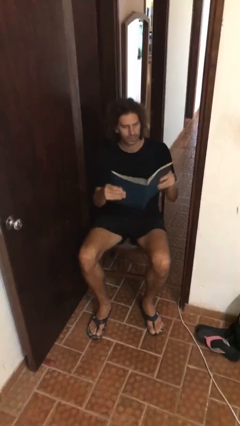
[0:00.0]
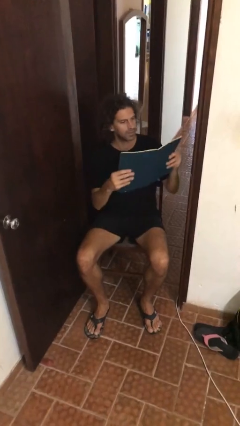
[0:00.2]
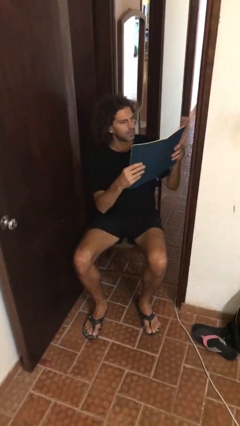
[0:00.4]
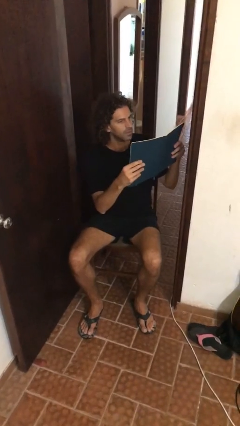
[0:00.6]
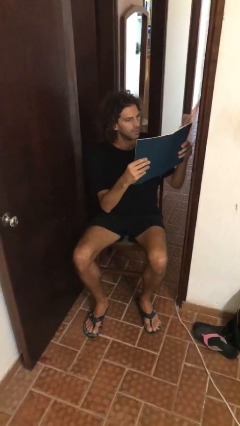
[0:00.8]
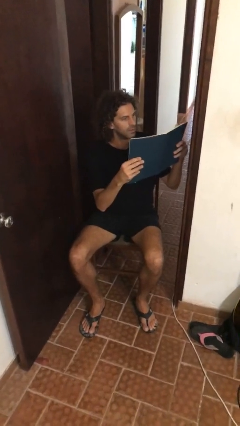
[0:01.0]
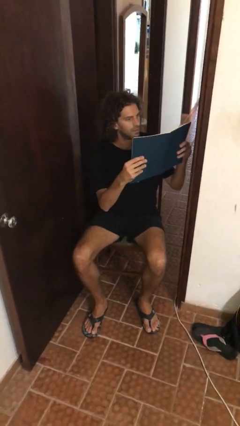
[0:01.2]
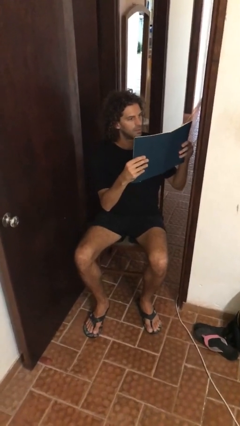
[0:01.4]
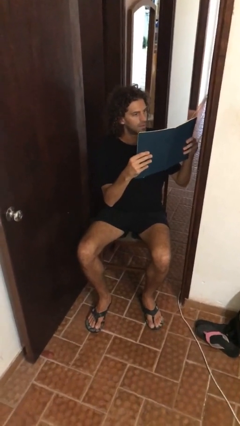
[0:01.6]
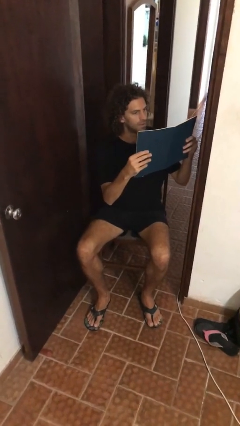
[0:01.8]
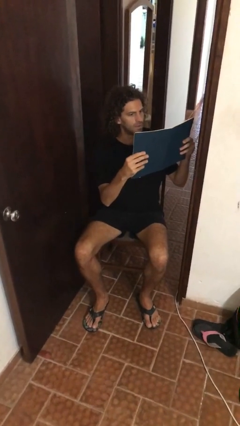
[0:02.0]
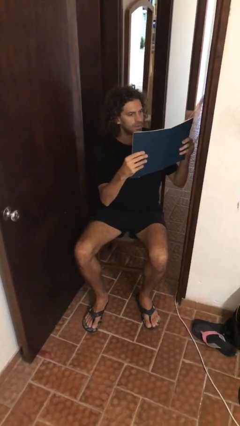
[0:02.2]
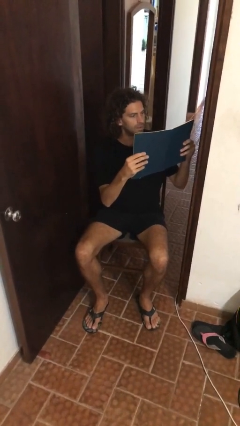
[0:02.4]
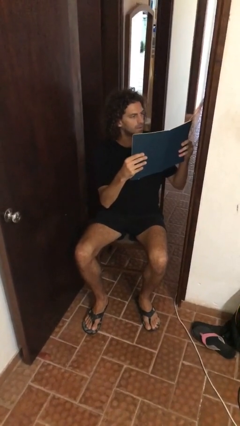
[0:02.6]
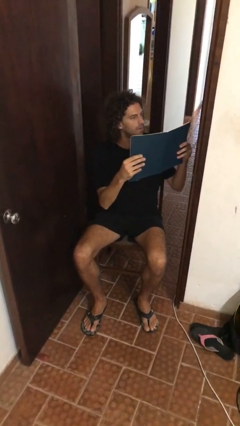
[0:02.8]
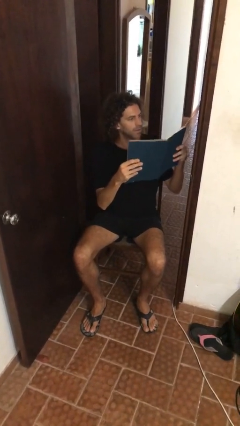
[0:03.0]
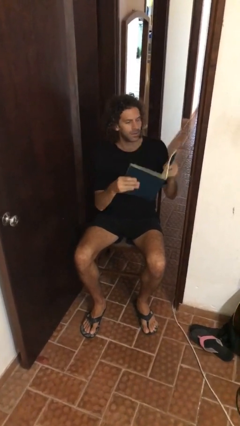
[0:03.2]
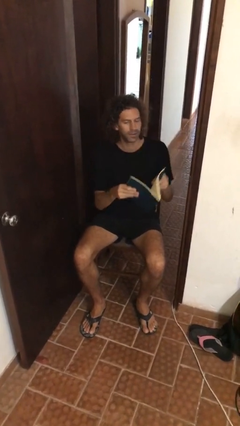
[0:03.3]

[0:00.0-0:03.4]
person reads document

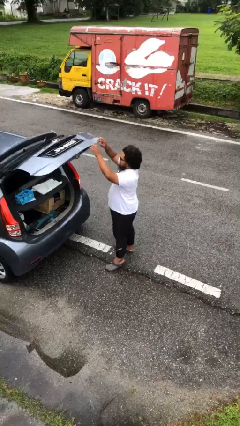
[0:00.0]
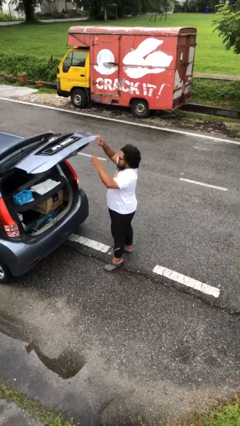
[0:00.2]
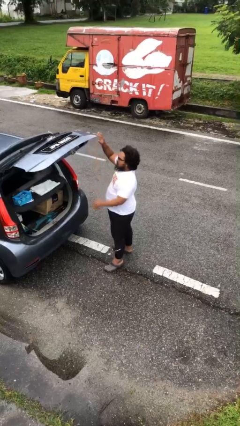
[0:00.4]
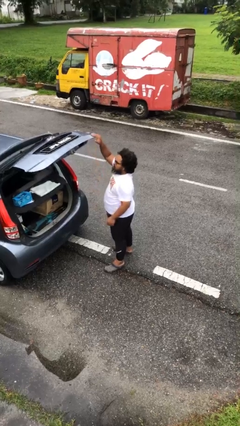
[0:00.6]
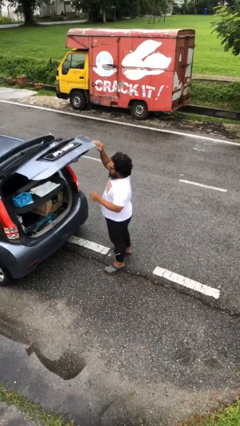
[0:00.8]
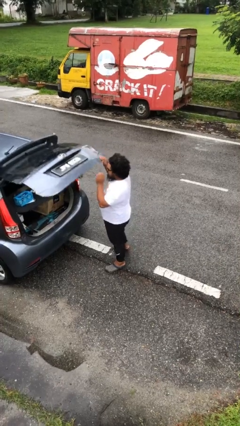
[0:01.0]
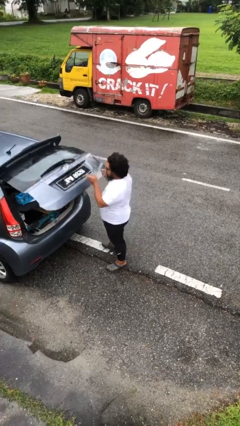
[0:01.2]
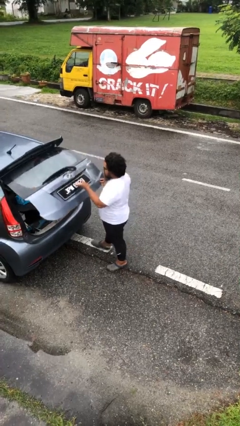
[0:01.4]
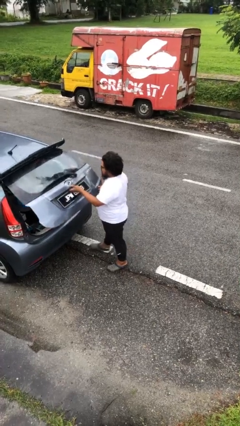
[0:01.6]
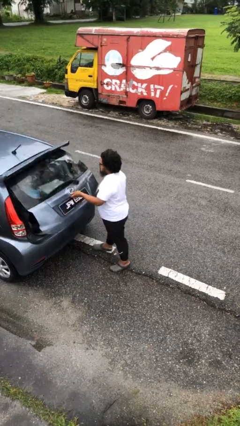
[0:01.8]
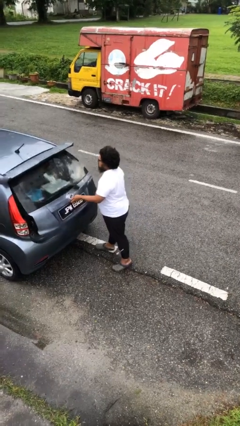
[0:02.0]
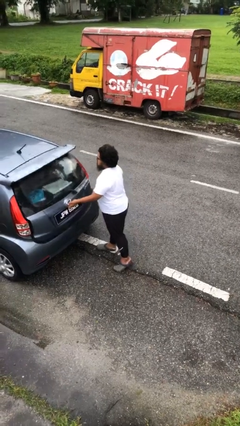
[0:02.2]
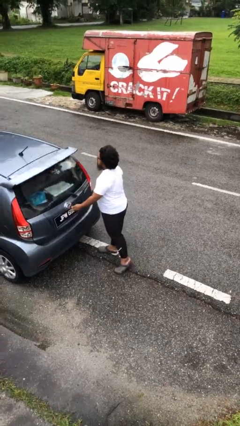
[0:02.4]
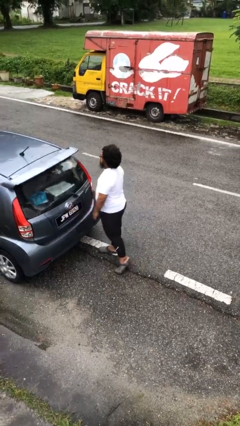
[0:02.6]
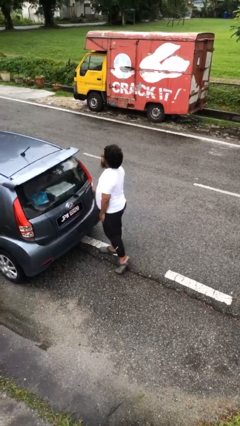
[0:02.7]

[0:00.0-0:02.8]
person closes car trunk

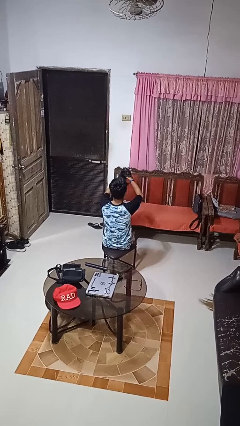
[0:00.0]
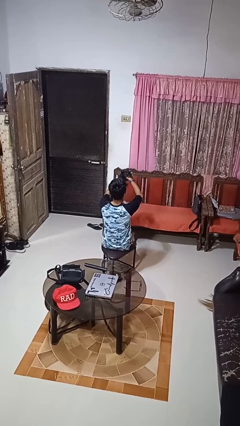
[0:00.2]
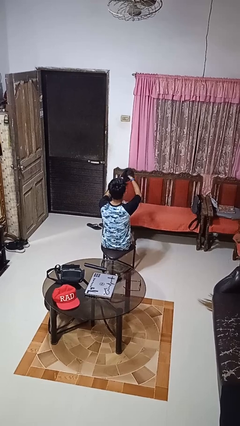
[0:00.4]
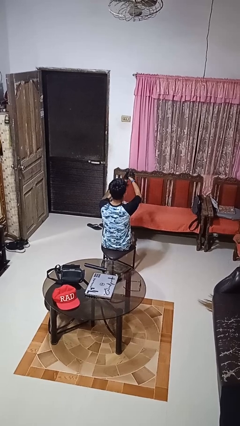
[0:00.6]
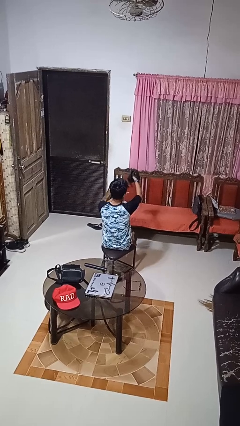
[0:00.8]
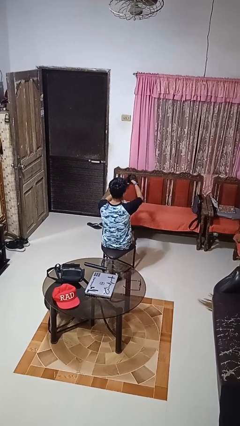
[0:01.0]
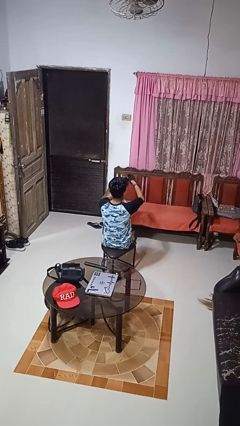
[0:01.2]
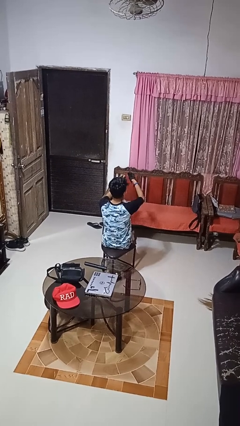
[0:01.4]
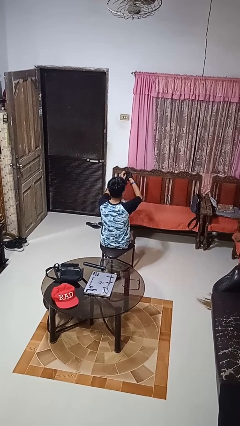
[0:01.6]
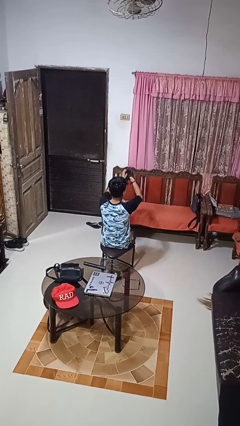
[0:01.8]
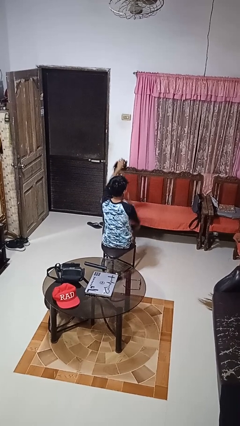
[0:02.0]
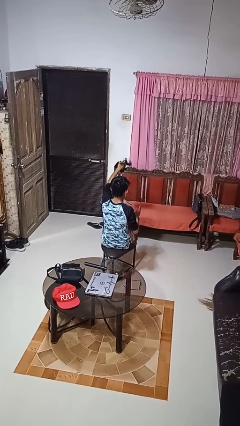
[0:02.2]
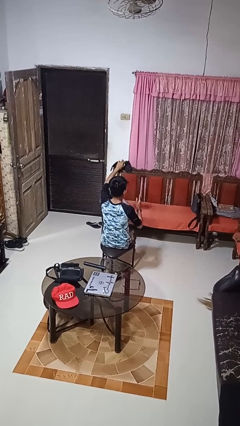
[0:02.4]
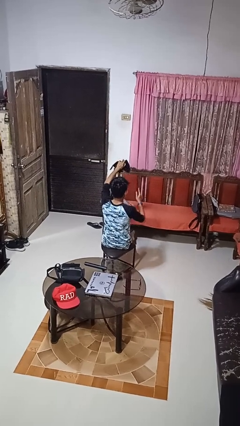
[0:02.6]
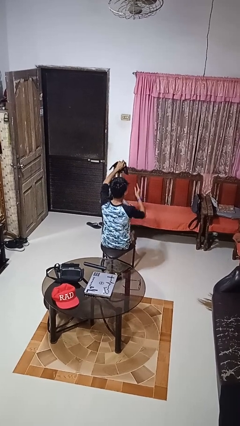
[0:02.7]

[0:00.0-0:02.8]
person takes off gloves

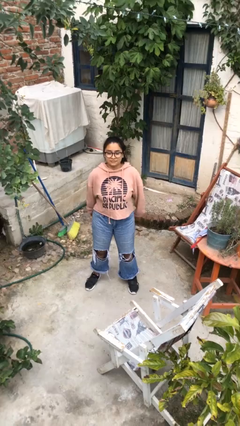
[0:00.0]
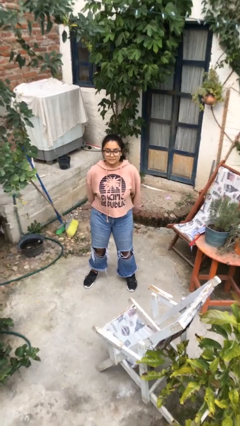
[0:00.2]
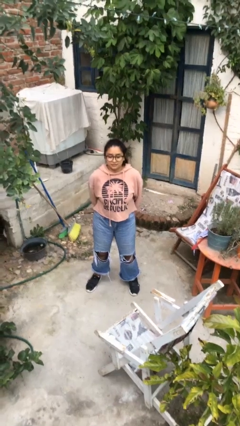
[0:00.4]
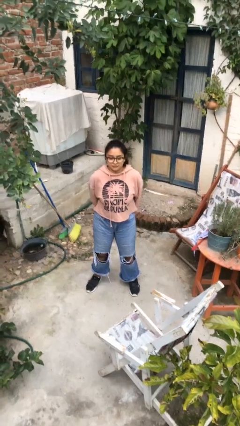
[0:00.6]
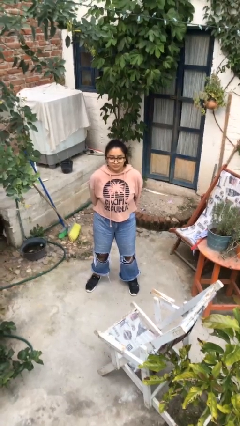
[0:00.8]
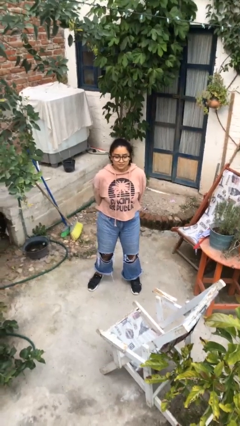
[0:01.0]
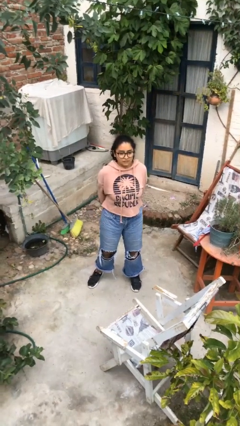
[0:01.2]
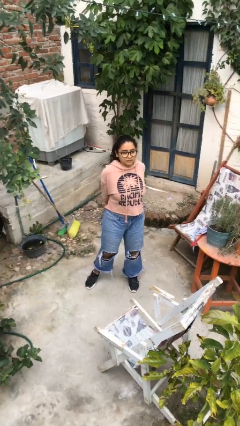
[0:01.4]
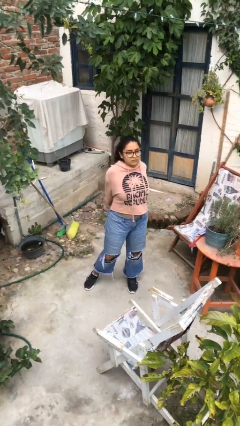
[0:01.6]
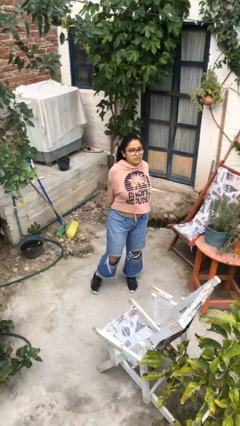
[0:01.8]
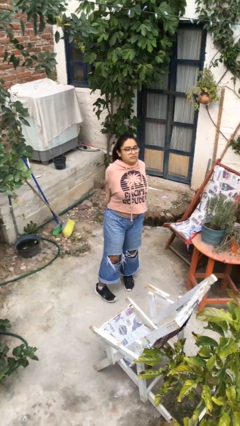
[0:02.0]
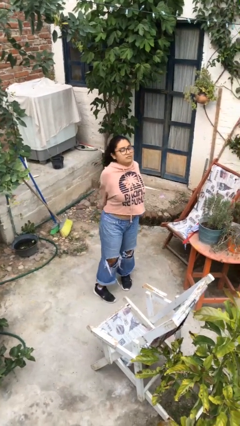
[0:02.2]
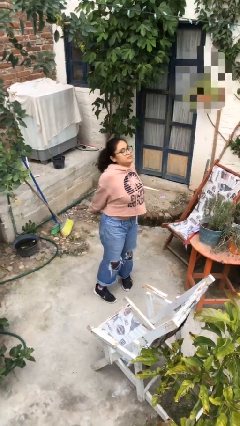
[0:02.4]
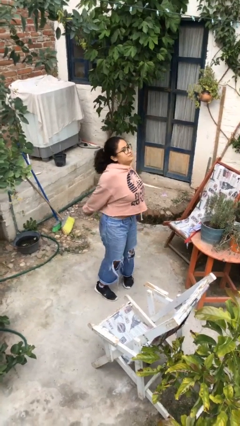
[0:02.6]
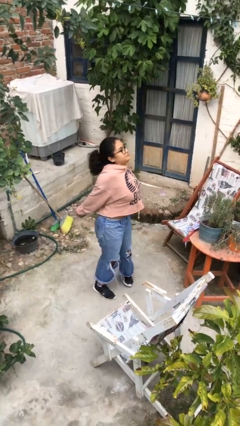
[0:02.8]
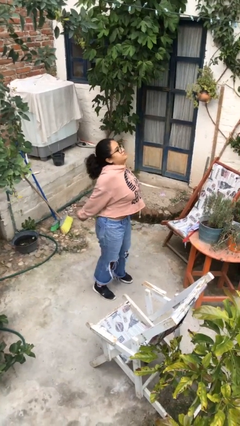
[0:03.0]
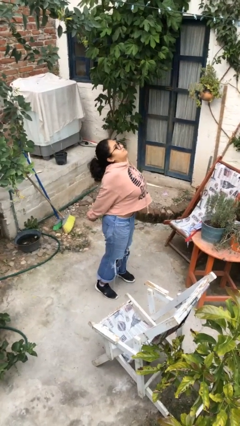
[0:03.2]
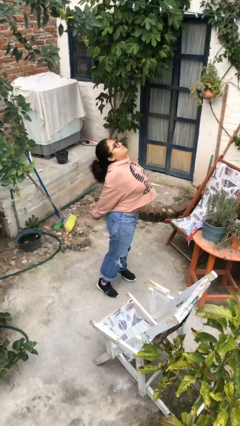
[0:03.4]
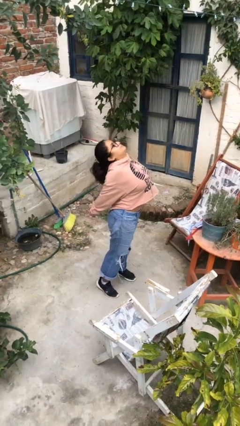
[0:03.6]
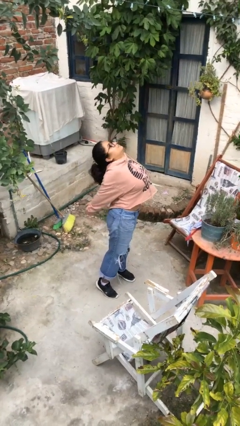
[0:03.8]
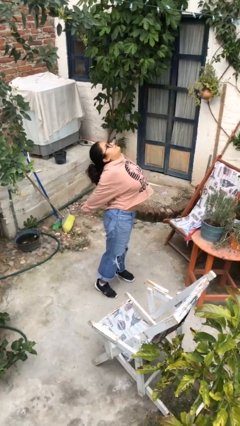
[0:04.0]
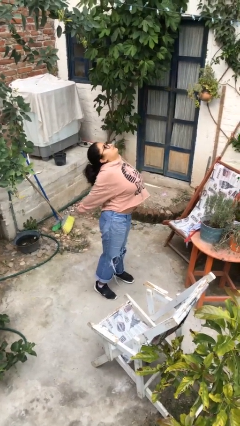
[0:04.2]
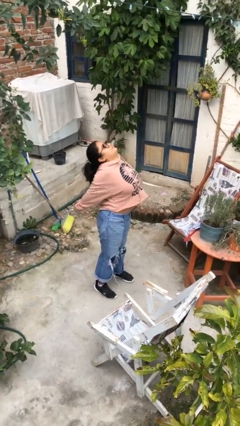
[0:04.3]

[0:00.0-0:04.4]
person stretches back

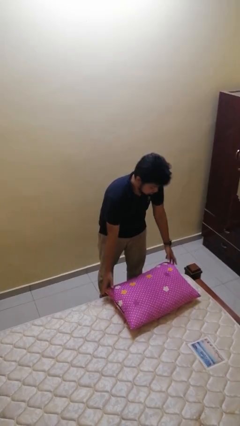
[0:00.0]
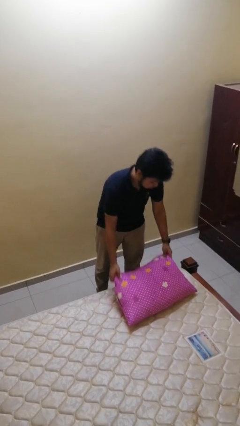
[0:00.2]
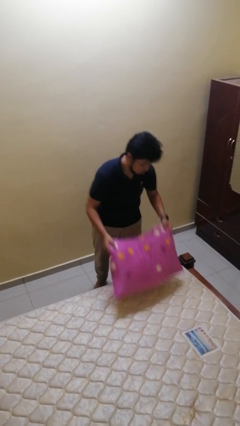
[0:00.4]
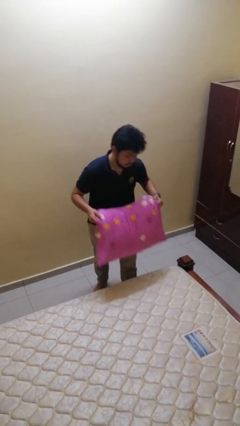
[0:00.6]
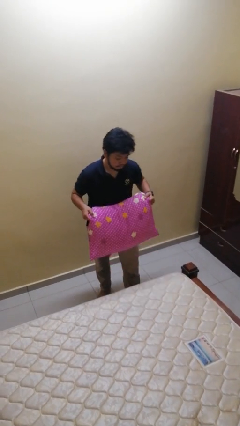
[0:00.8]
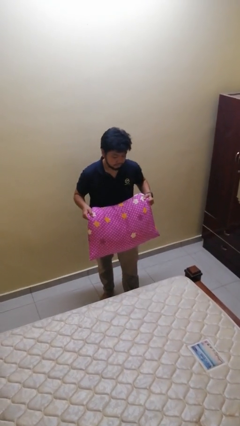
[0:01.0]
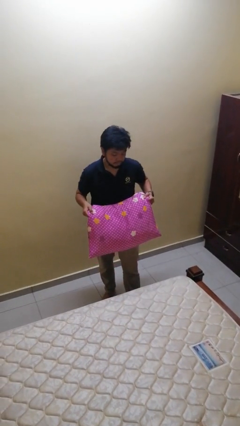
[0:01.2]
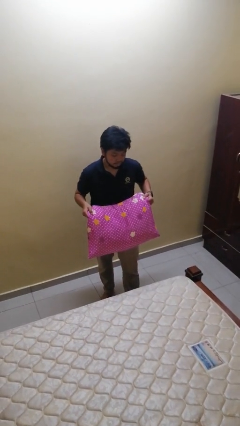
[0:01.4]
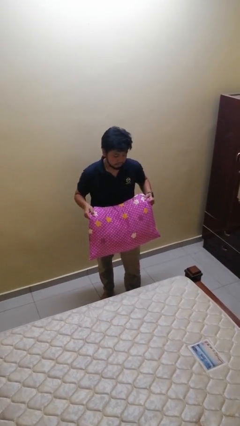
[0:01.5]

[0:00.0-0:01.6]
person picks up object from bed

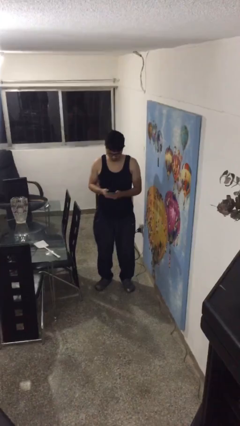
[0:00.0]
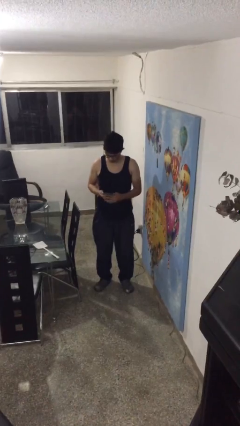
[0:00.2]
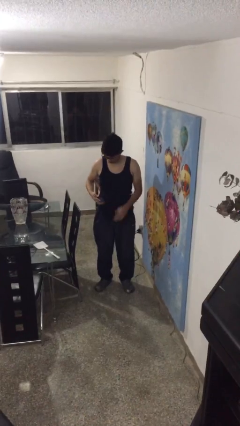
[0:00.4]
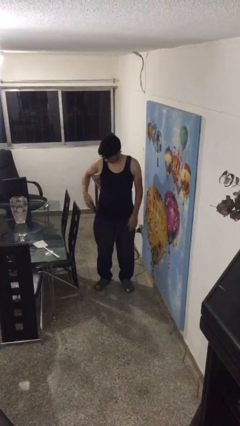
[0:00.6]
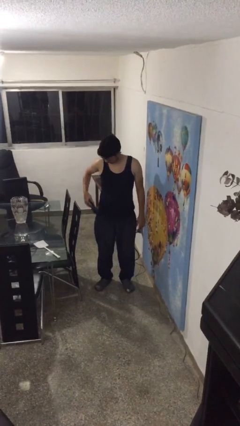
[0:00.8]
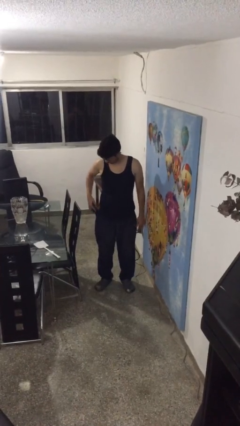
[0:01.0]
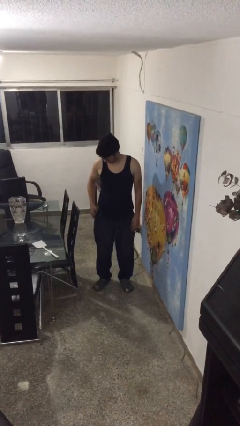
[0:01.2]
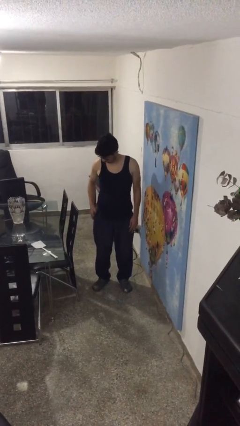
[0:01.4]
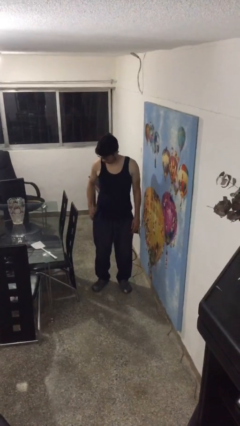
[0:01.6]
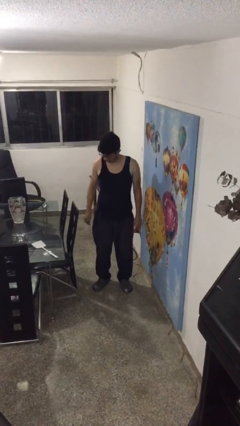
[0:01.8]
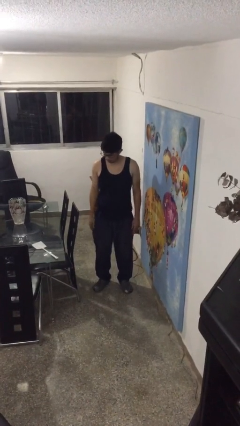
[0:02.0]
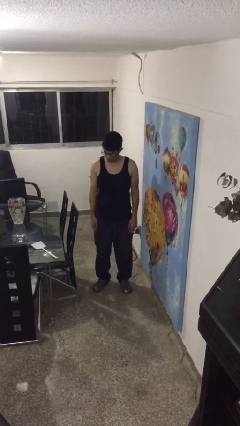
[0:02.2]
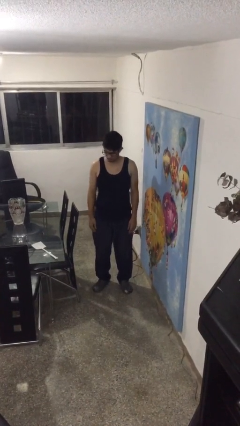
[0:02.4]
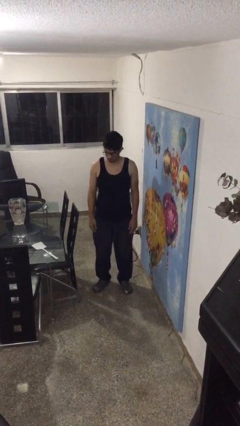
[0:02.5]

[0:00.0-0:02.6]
person puts phone into pocket
